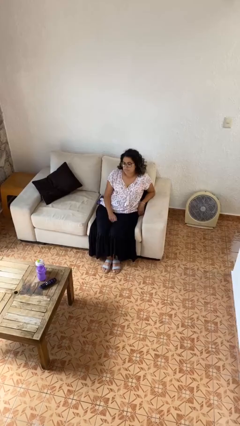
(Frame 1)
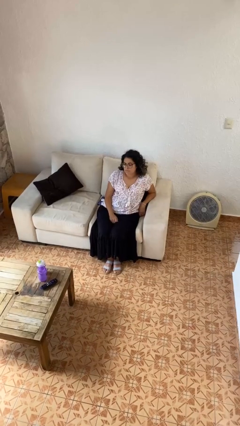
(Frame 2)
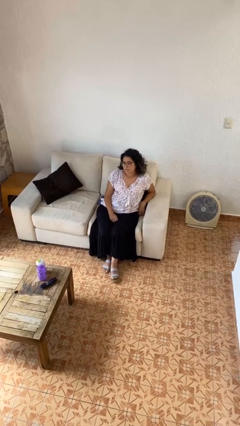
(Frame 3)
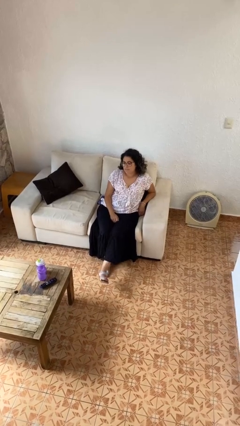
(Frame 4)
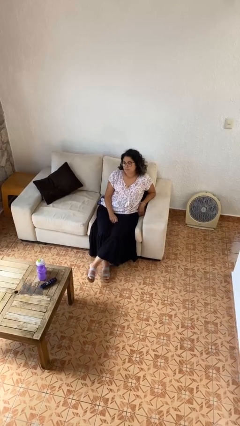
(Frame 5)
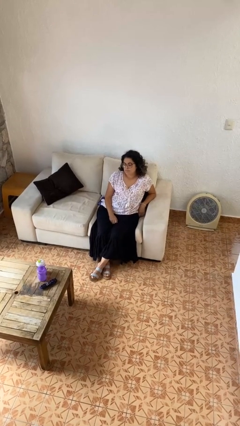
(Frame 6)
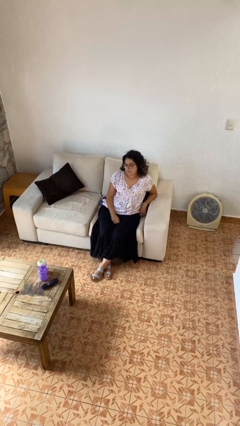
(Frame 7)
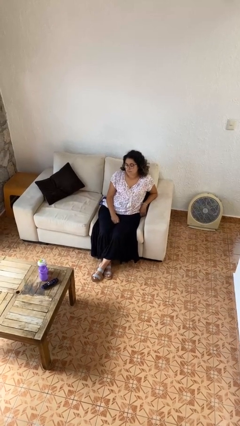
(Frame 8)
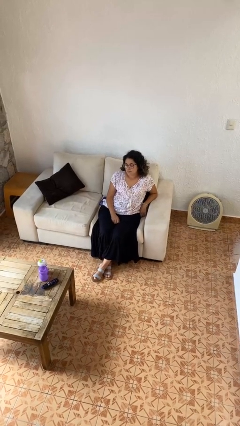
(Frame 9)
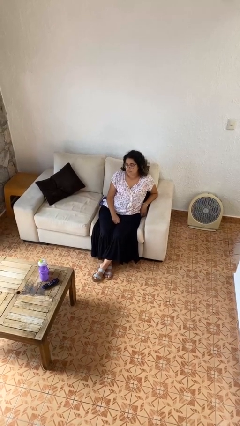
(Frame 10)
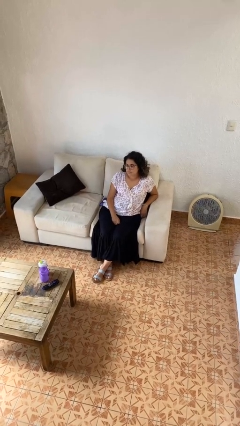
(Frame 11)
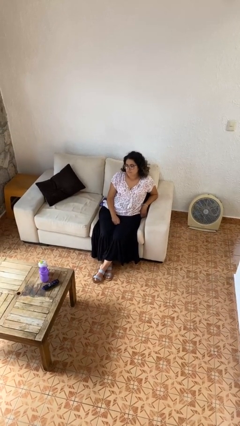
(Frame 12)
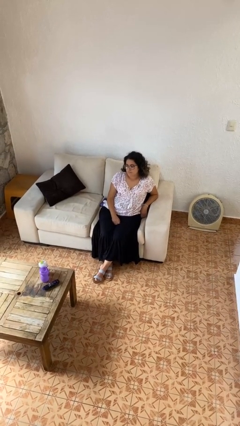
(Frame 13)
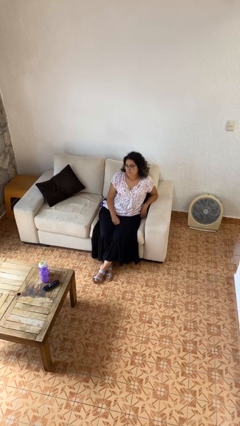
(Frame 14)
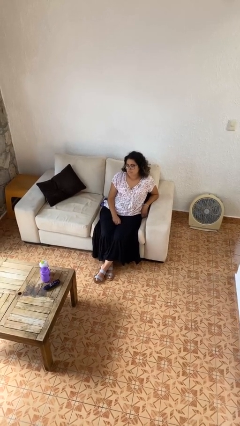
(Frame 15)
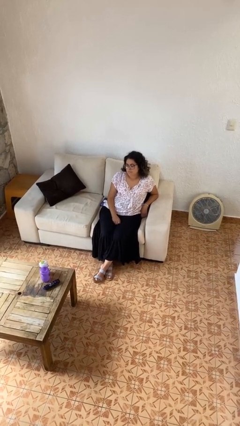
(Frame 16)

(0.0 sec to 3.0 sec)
person crosses legs

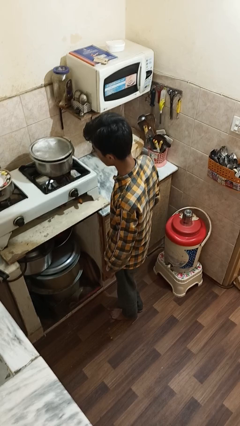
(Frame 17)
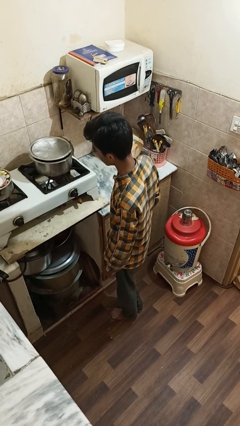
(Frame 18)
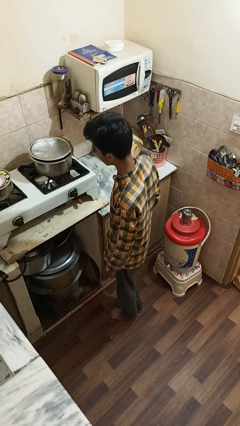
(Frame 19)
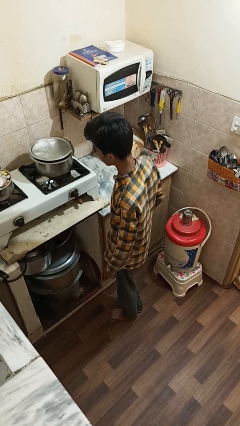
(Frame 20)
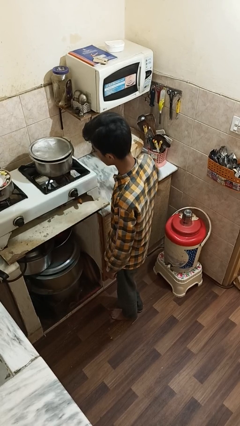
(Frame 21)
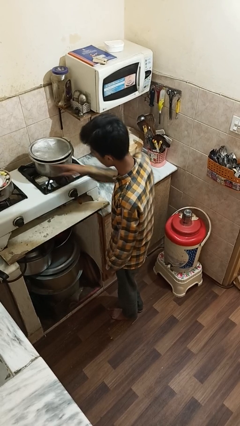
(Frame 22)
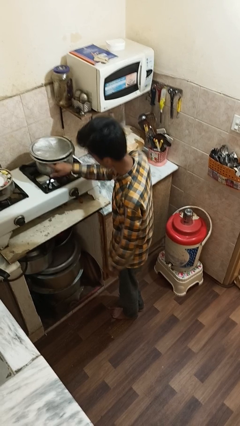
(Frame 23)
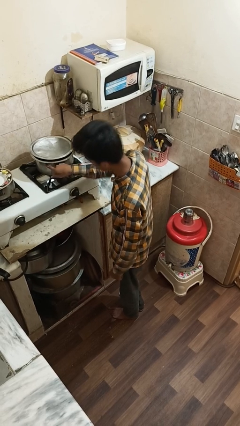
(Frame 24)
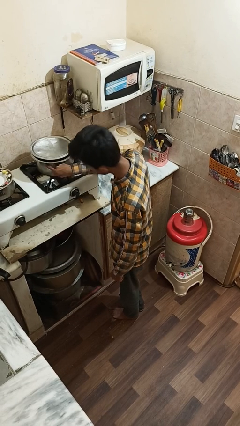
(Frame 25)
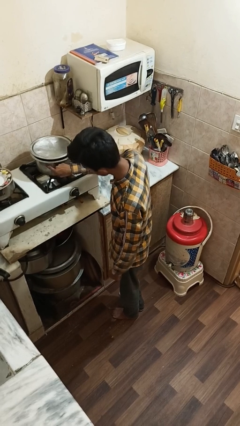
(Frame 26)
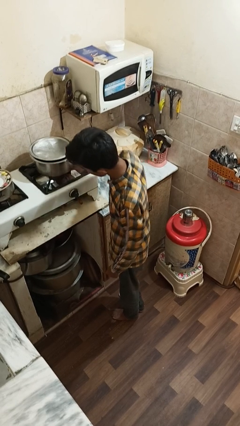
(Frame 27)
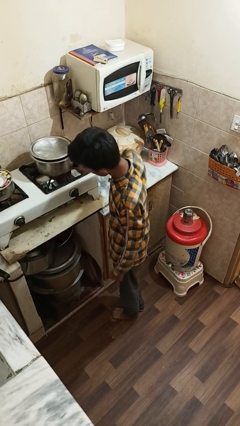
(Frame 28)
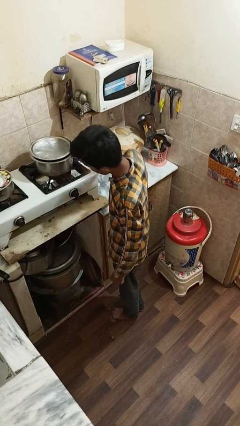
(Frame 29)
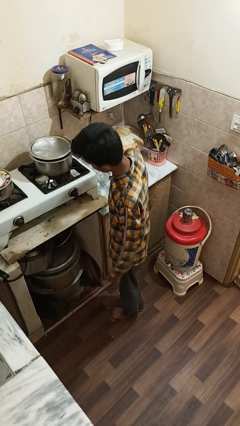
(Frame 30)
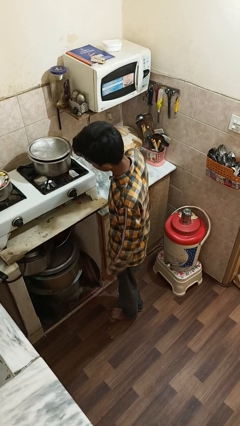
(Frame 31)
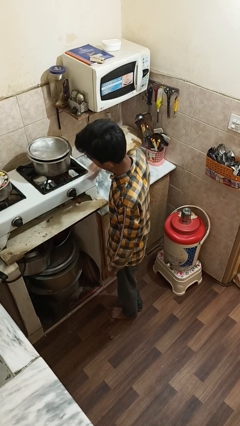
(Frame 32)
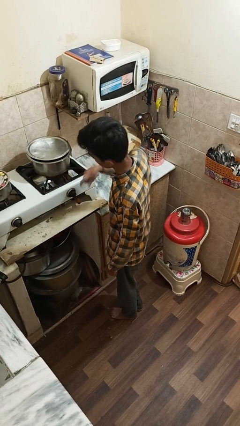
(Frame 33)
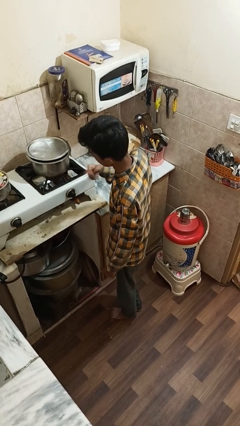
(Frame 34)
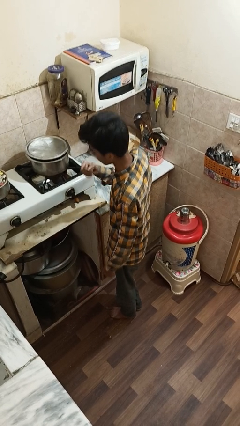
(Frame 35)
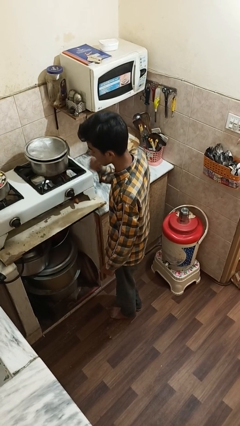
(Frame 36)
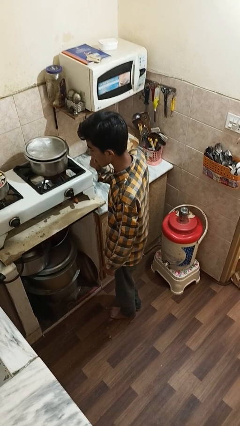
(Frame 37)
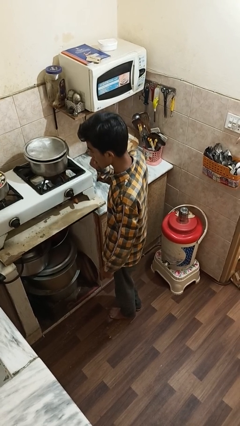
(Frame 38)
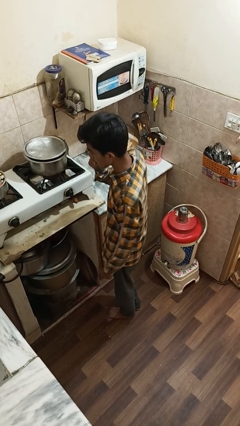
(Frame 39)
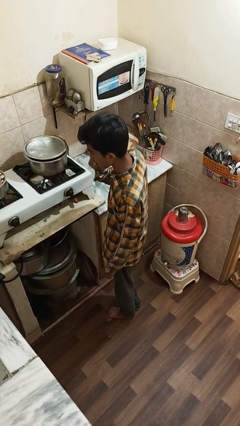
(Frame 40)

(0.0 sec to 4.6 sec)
person burns hand

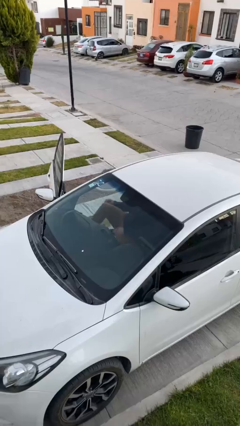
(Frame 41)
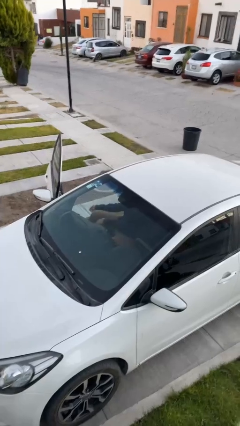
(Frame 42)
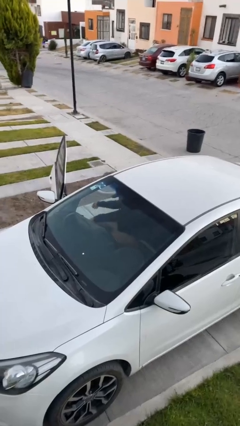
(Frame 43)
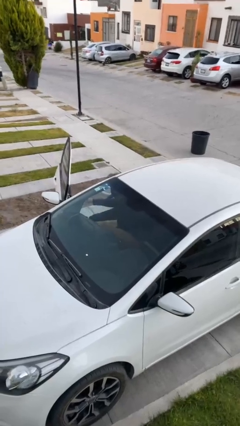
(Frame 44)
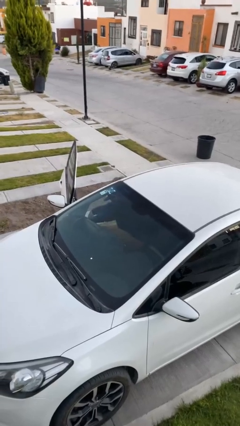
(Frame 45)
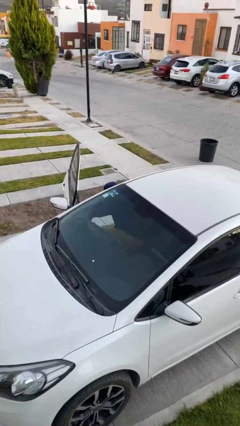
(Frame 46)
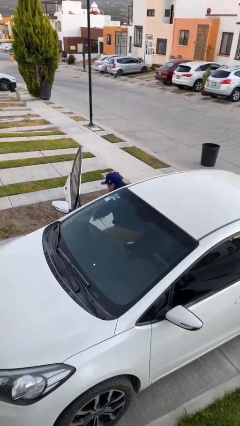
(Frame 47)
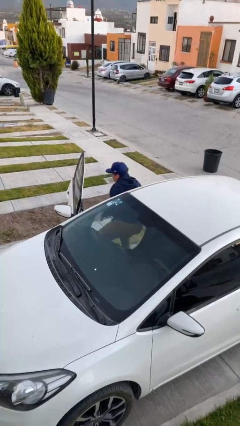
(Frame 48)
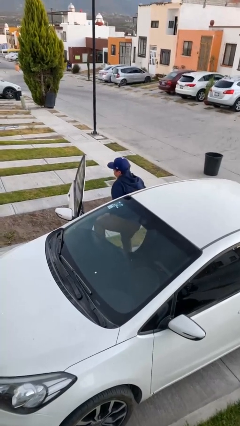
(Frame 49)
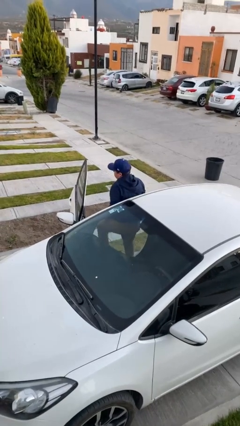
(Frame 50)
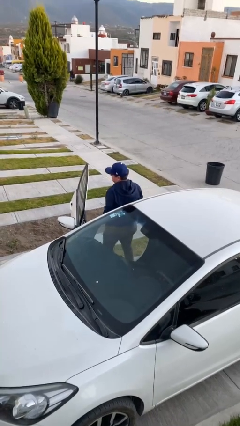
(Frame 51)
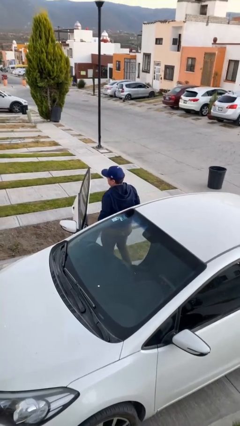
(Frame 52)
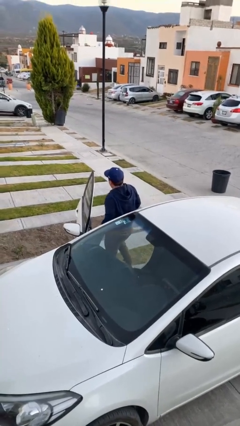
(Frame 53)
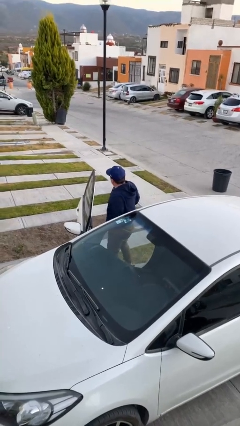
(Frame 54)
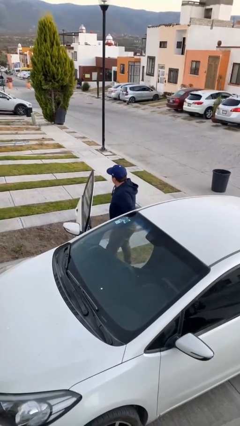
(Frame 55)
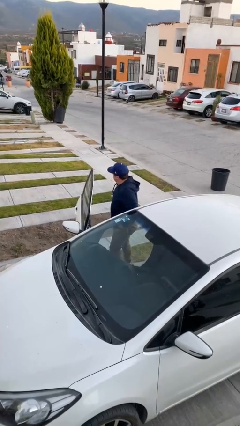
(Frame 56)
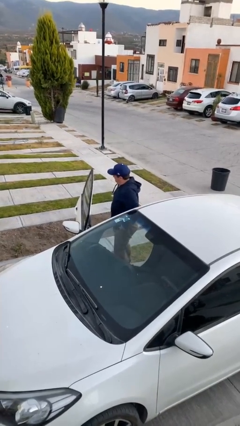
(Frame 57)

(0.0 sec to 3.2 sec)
person exits car

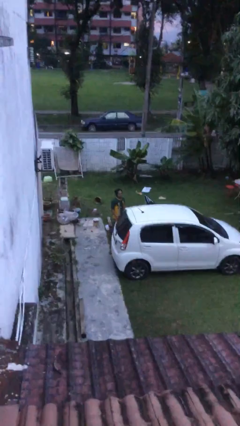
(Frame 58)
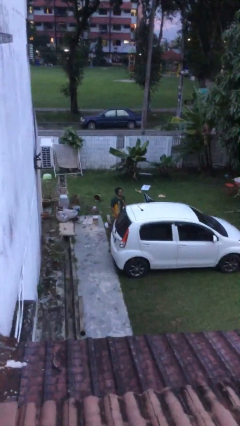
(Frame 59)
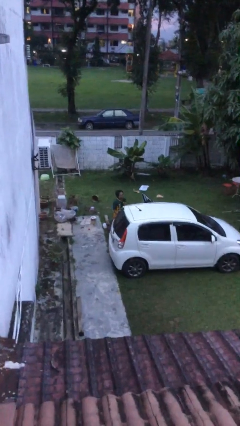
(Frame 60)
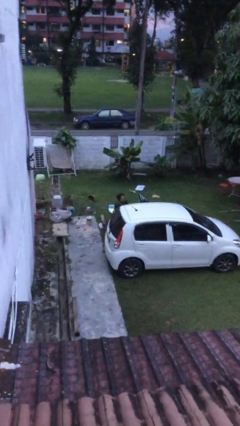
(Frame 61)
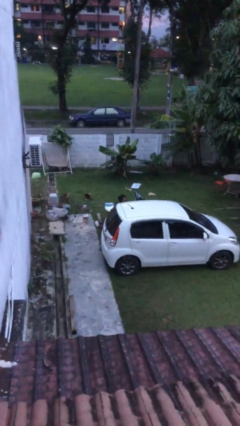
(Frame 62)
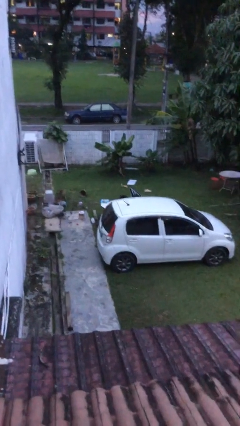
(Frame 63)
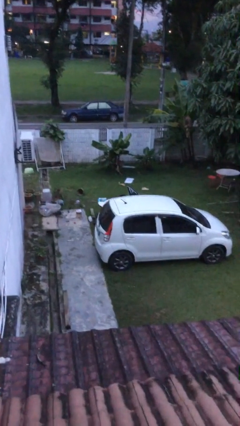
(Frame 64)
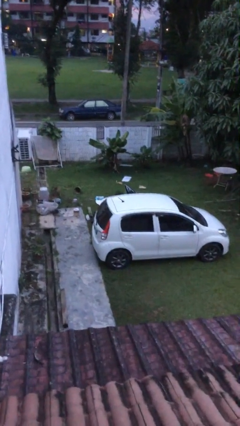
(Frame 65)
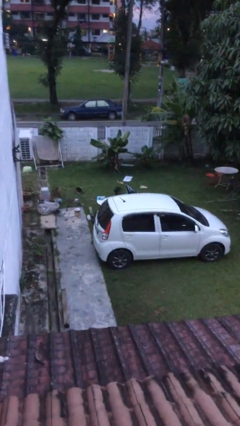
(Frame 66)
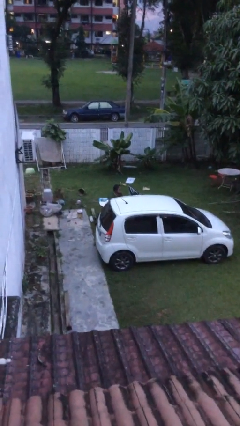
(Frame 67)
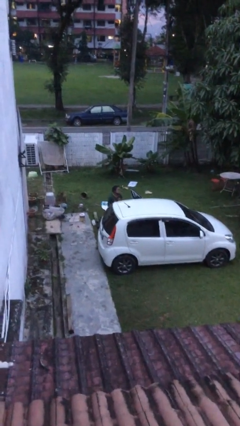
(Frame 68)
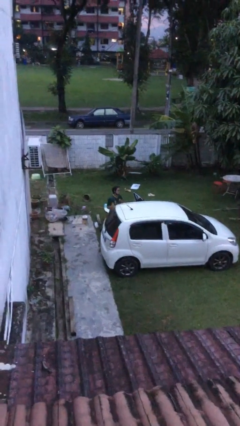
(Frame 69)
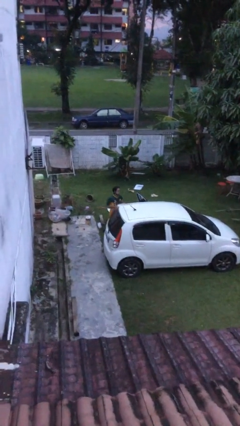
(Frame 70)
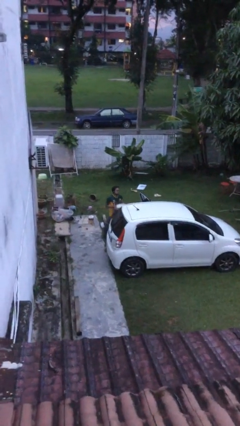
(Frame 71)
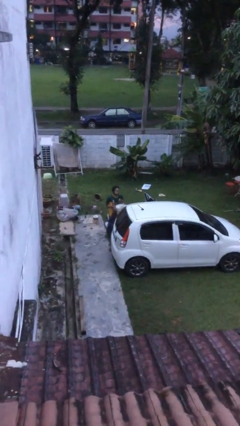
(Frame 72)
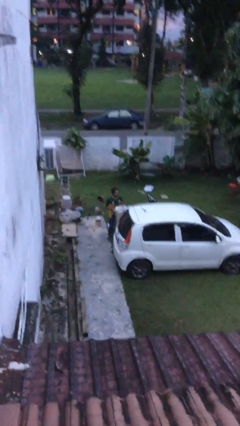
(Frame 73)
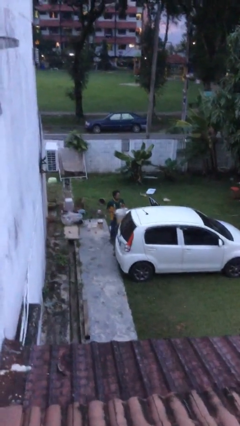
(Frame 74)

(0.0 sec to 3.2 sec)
person unloads car

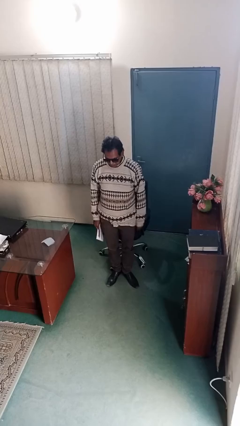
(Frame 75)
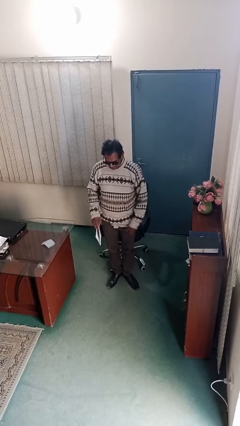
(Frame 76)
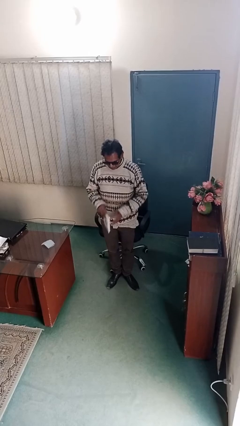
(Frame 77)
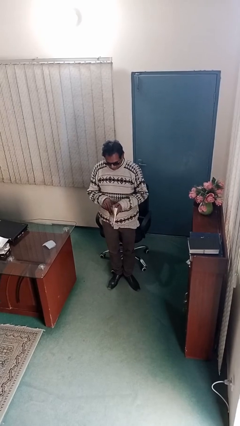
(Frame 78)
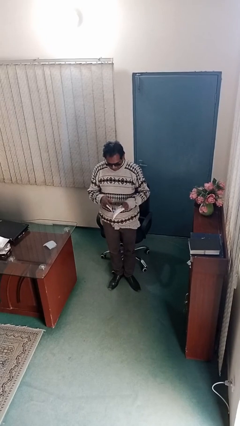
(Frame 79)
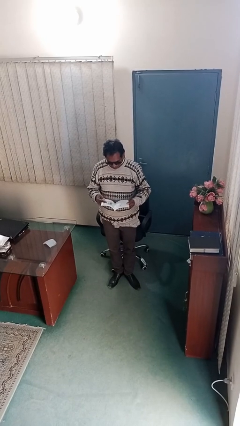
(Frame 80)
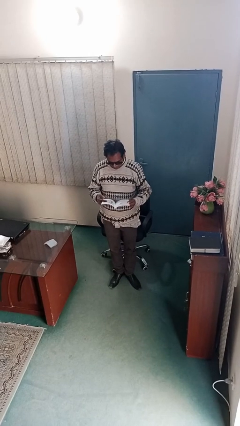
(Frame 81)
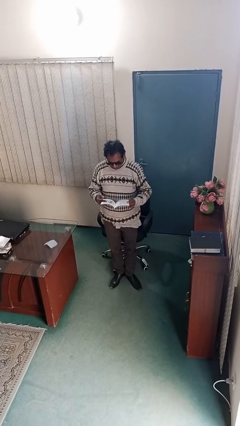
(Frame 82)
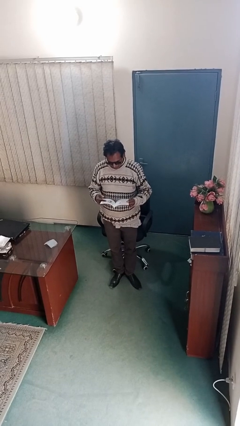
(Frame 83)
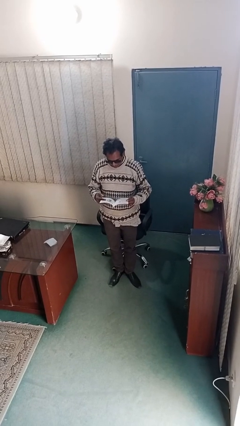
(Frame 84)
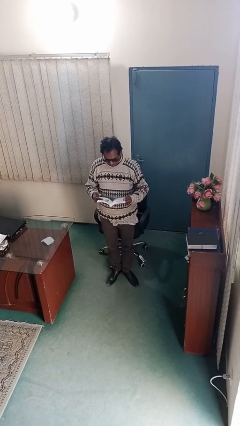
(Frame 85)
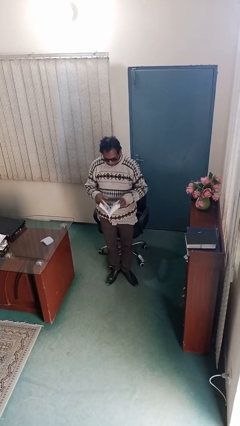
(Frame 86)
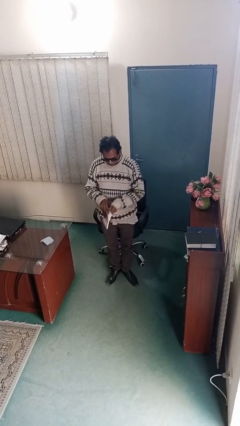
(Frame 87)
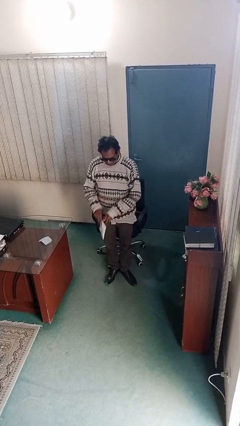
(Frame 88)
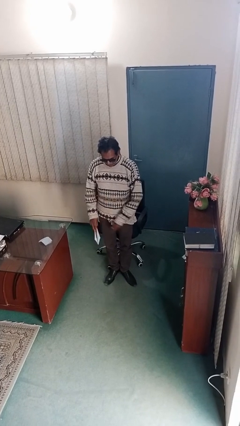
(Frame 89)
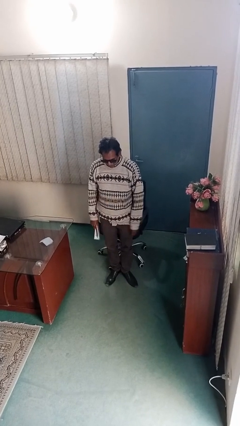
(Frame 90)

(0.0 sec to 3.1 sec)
person reads document

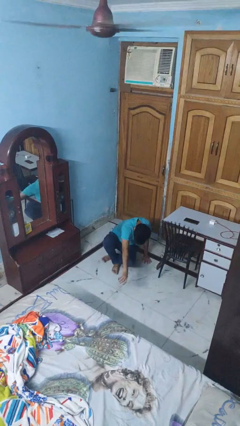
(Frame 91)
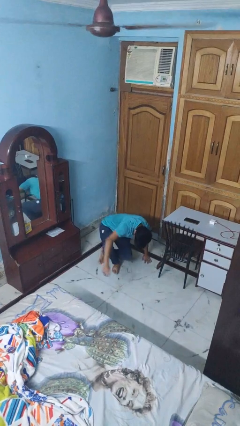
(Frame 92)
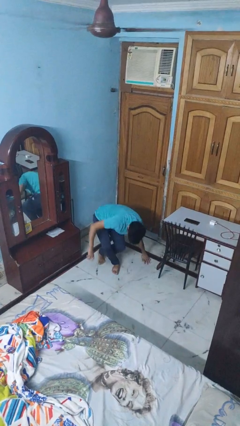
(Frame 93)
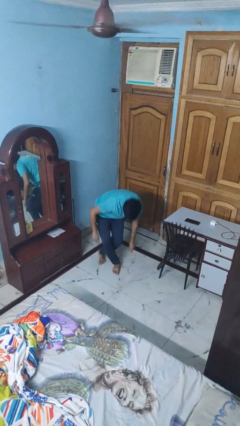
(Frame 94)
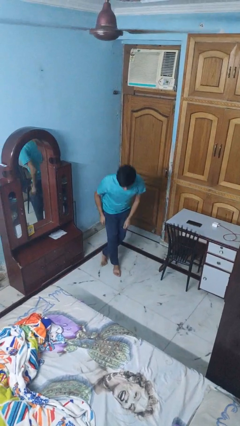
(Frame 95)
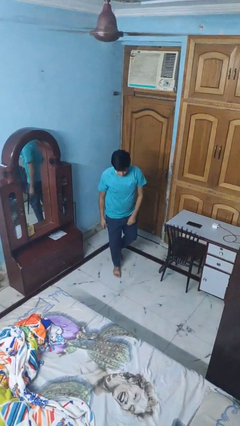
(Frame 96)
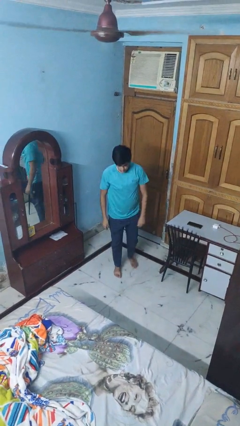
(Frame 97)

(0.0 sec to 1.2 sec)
person stands up from floor
